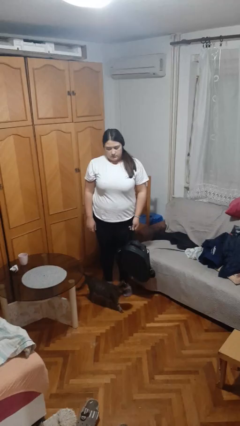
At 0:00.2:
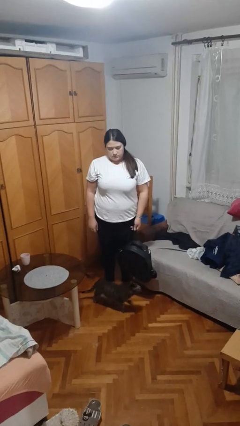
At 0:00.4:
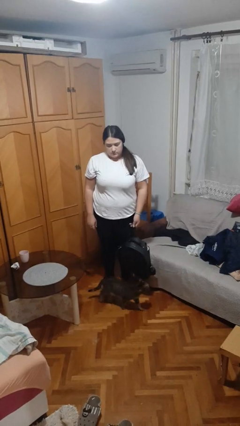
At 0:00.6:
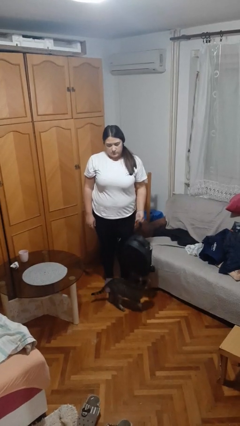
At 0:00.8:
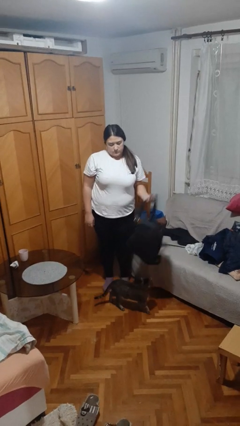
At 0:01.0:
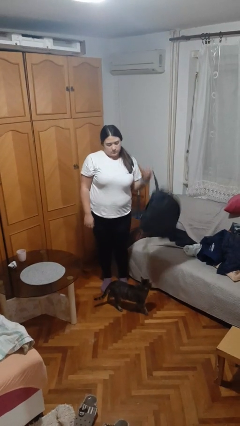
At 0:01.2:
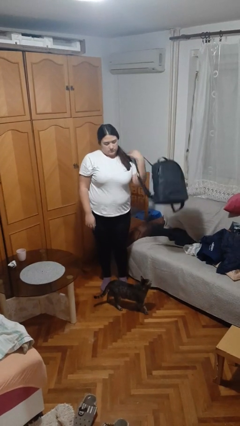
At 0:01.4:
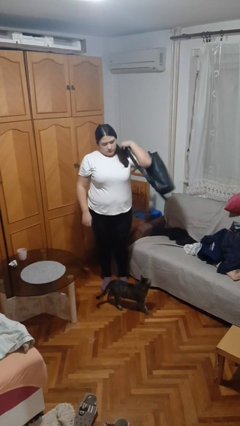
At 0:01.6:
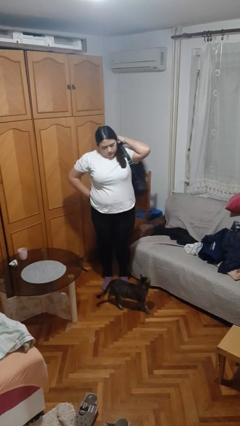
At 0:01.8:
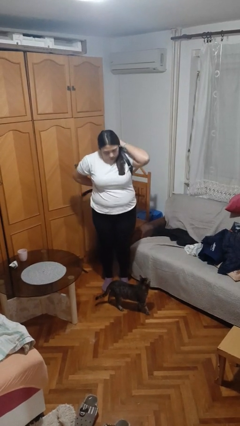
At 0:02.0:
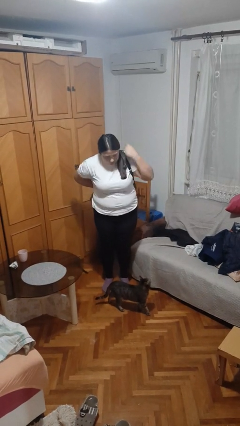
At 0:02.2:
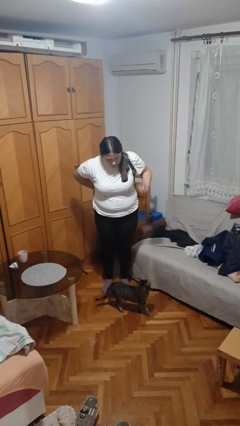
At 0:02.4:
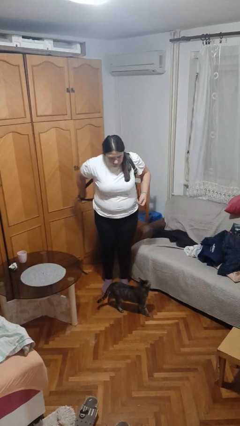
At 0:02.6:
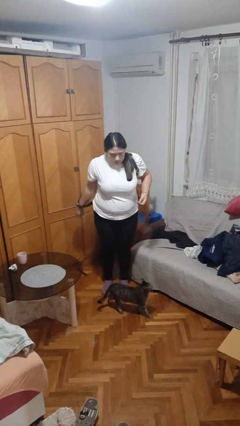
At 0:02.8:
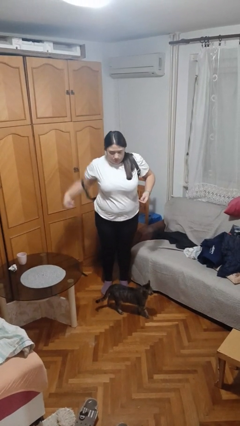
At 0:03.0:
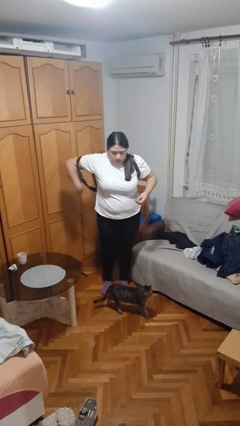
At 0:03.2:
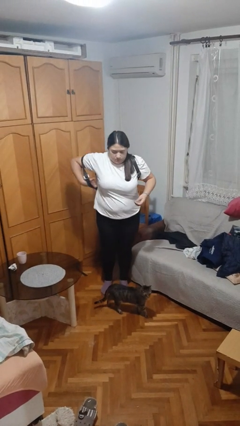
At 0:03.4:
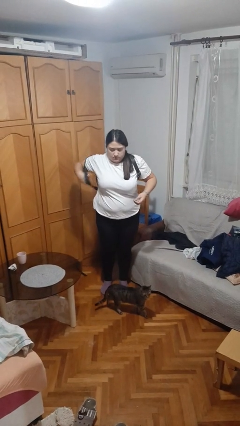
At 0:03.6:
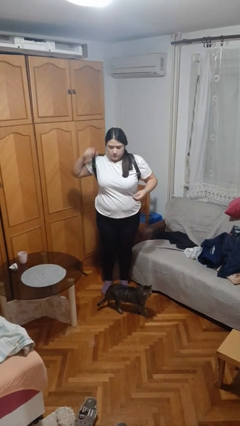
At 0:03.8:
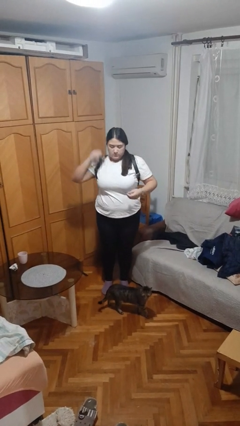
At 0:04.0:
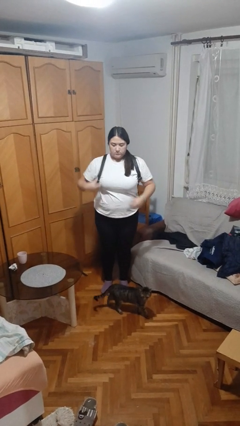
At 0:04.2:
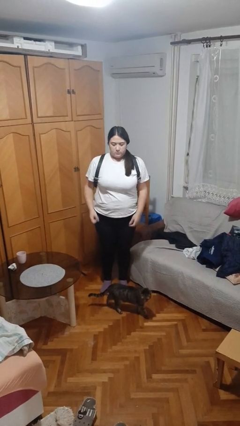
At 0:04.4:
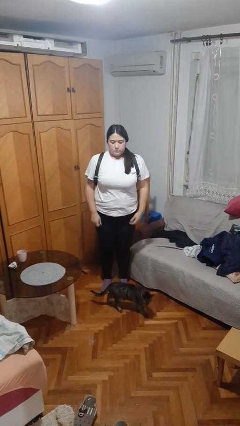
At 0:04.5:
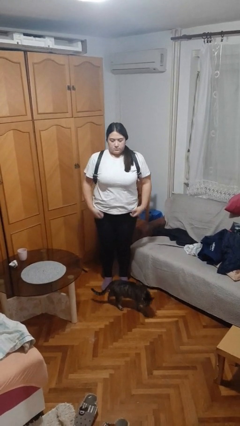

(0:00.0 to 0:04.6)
person puts on backpack

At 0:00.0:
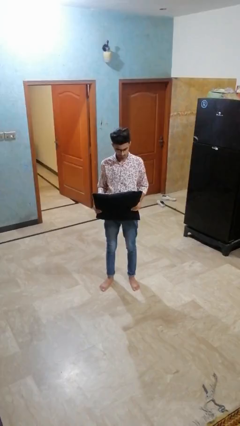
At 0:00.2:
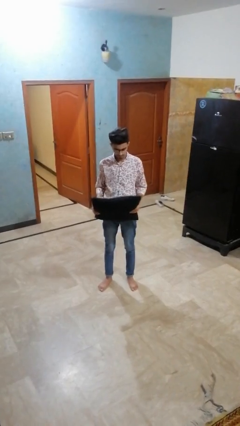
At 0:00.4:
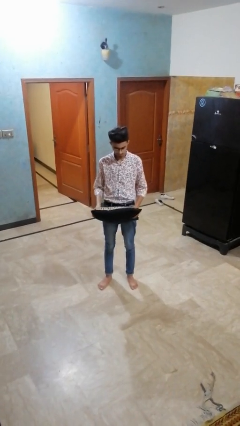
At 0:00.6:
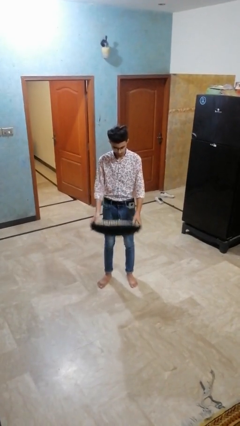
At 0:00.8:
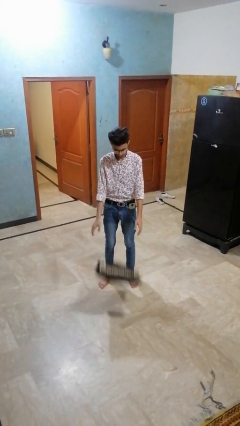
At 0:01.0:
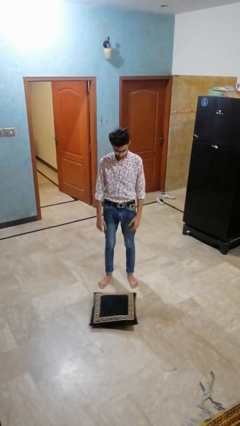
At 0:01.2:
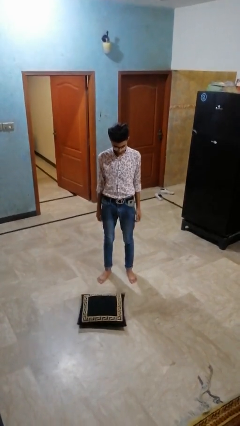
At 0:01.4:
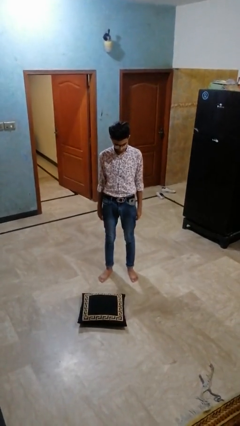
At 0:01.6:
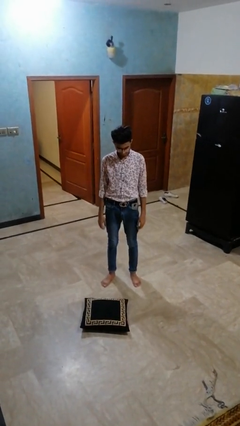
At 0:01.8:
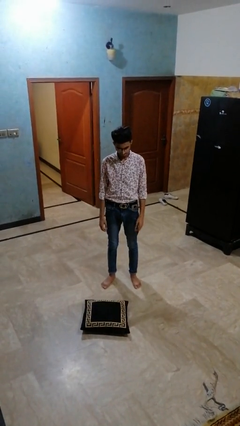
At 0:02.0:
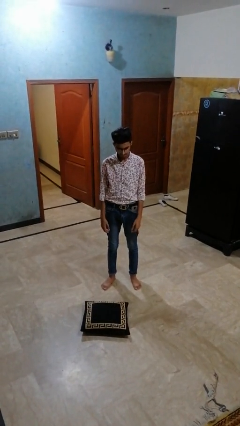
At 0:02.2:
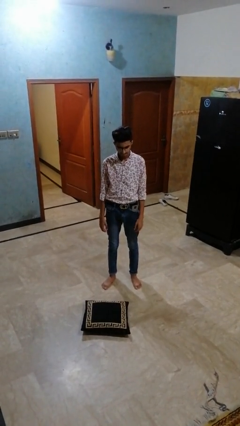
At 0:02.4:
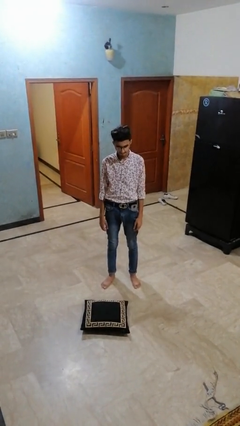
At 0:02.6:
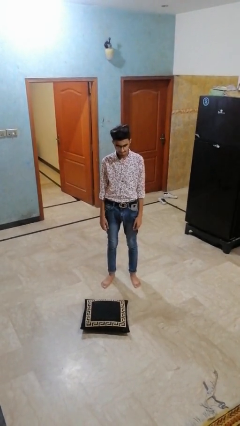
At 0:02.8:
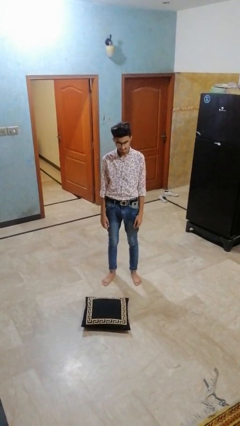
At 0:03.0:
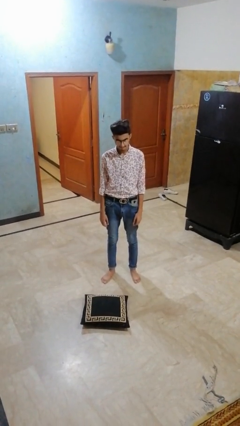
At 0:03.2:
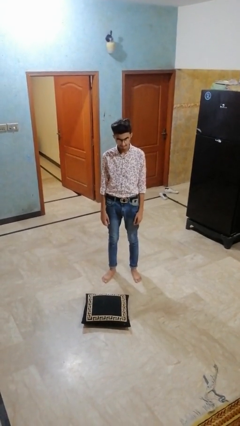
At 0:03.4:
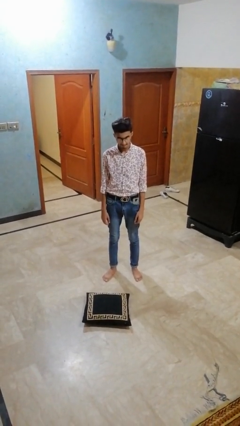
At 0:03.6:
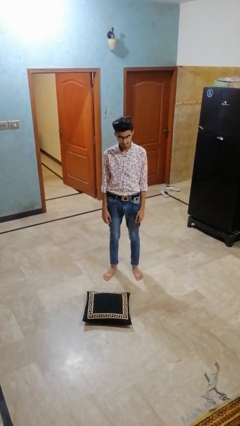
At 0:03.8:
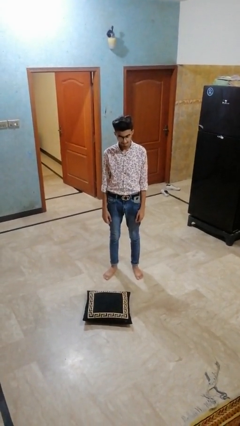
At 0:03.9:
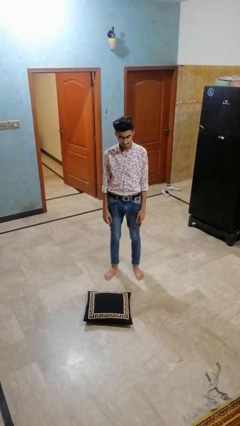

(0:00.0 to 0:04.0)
person throws object to ground

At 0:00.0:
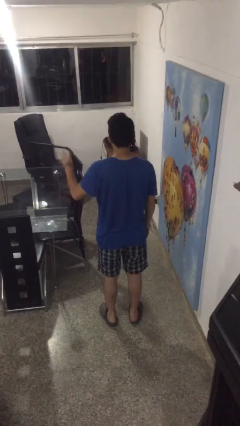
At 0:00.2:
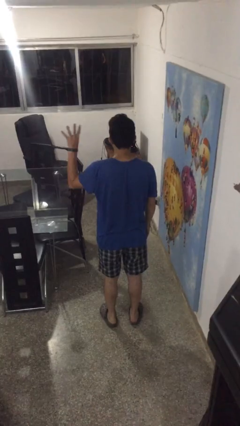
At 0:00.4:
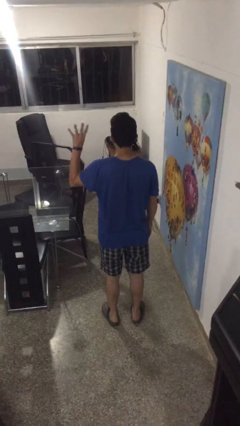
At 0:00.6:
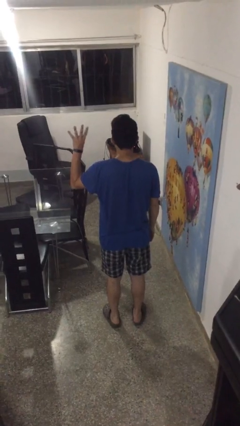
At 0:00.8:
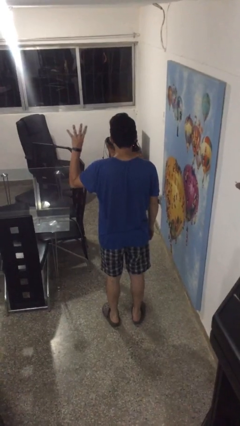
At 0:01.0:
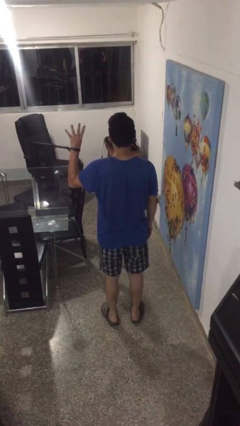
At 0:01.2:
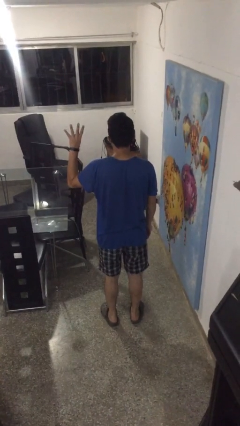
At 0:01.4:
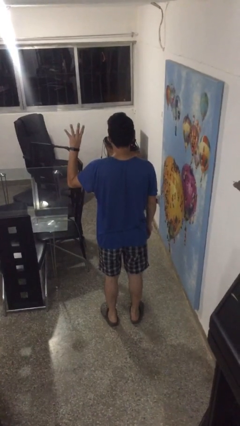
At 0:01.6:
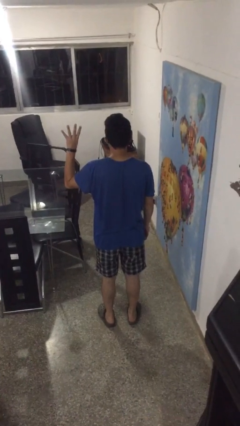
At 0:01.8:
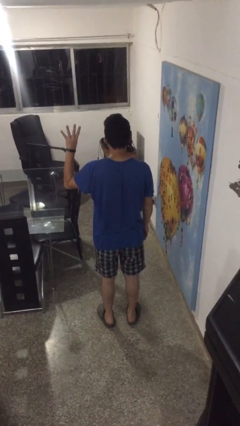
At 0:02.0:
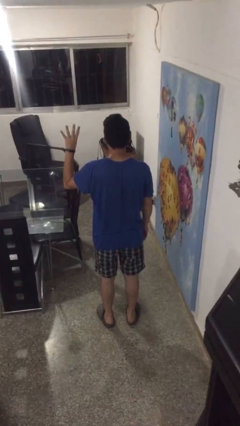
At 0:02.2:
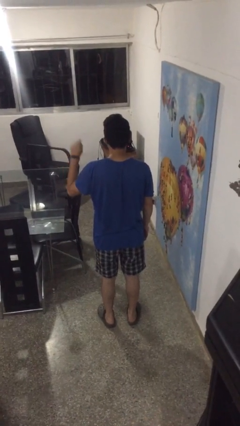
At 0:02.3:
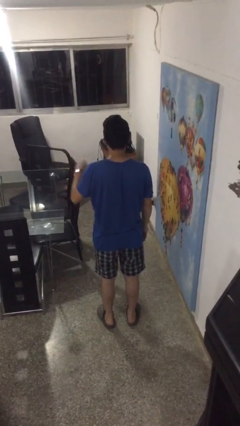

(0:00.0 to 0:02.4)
person gestures number four

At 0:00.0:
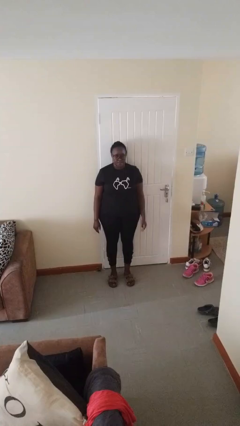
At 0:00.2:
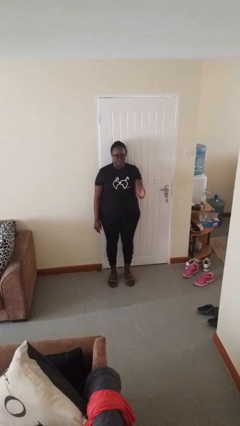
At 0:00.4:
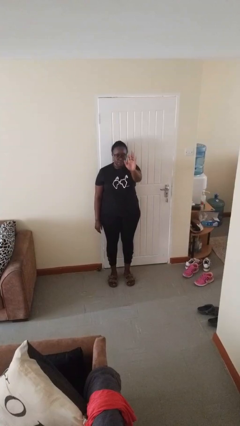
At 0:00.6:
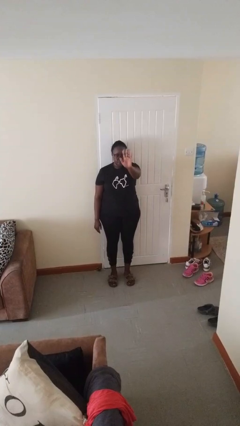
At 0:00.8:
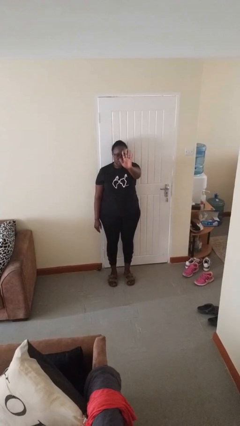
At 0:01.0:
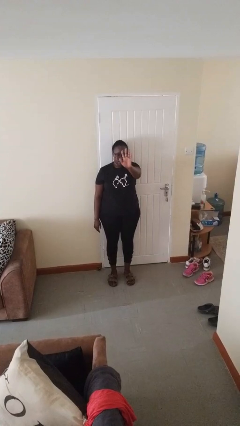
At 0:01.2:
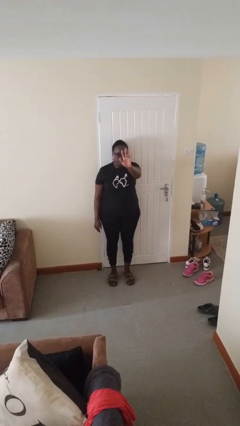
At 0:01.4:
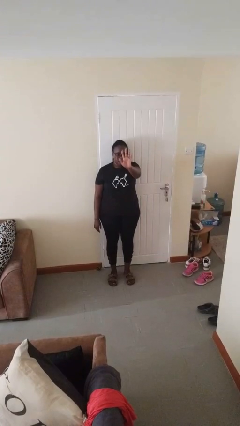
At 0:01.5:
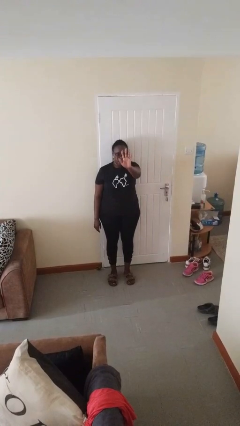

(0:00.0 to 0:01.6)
person gestures number five

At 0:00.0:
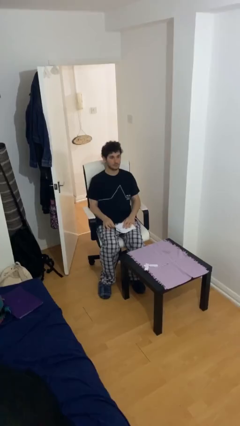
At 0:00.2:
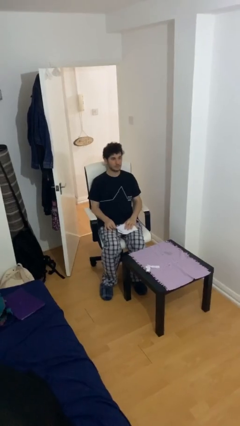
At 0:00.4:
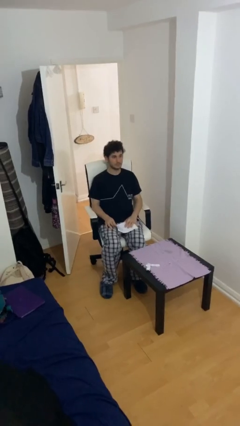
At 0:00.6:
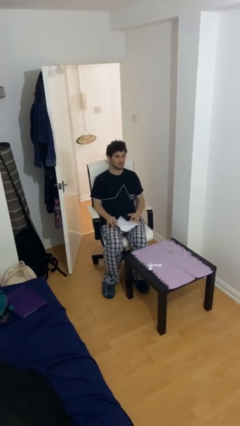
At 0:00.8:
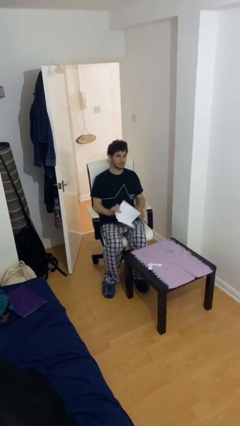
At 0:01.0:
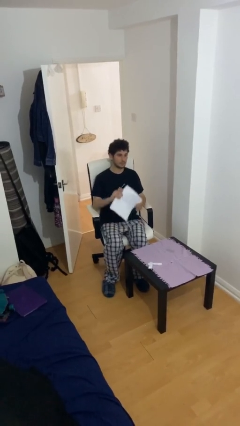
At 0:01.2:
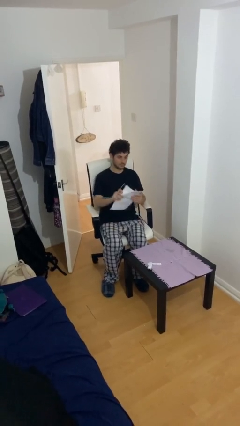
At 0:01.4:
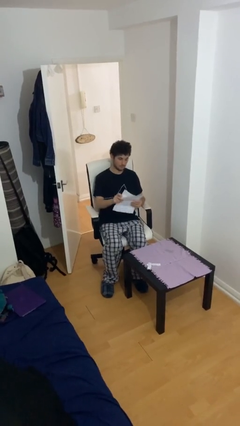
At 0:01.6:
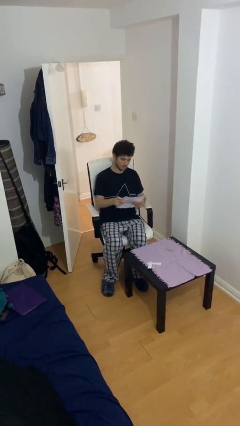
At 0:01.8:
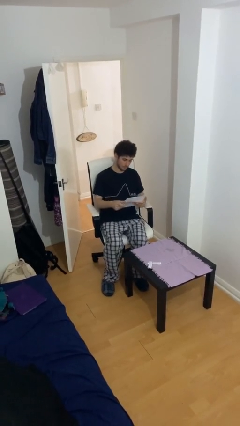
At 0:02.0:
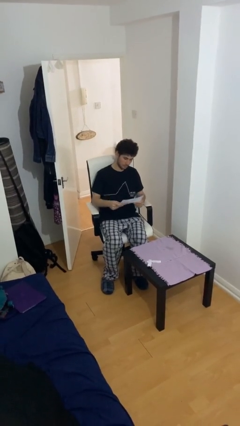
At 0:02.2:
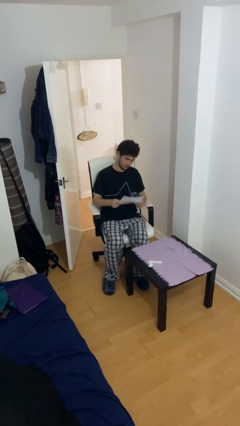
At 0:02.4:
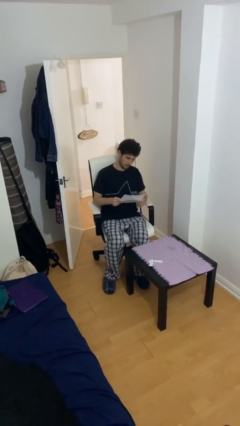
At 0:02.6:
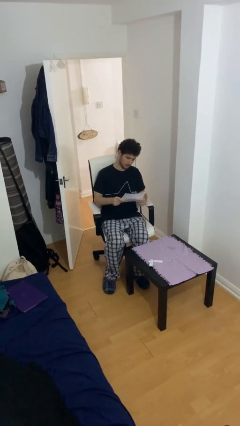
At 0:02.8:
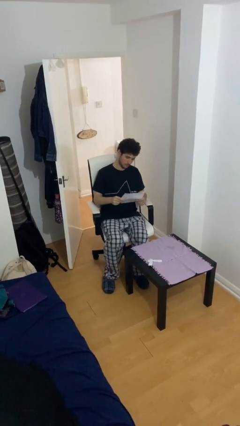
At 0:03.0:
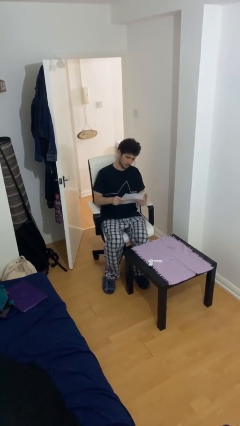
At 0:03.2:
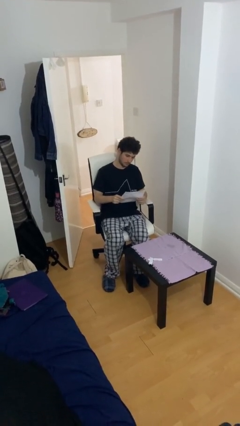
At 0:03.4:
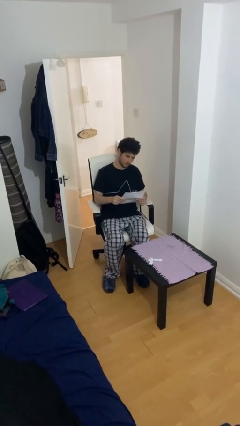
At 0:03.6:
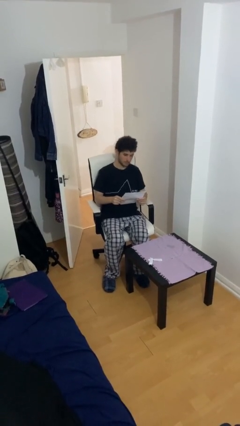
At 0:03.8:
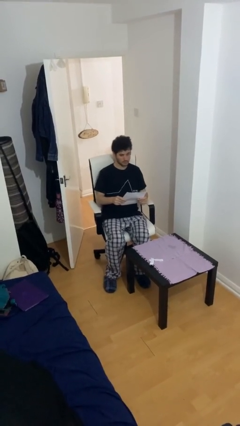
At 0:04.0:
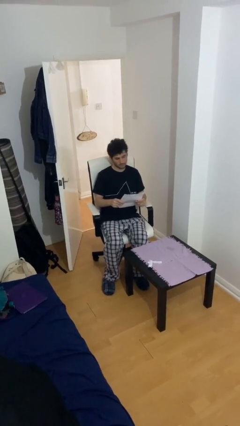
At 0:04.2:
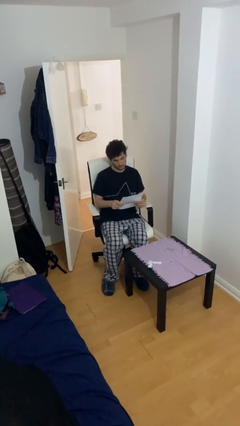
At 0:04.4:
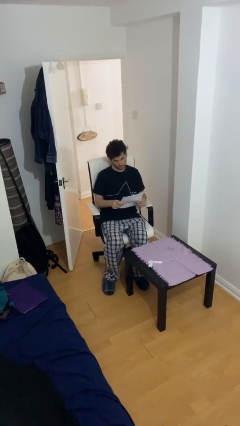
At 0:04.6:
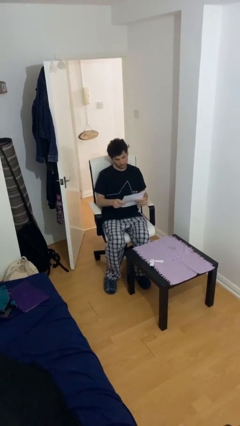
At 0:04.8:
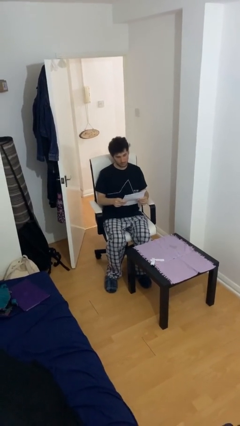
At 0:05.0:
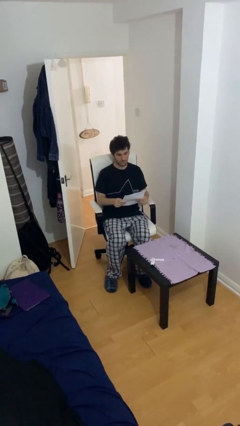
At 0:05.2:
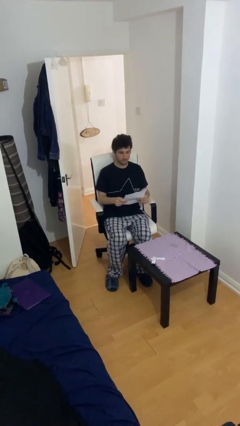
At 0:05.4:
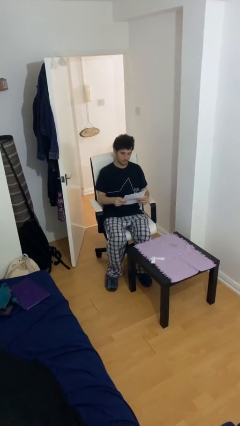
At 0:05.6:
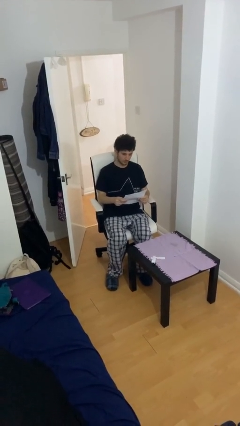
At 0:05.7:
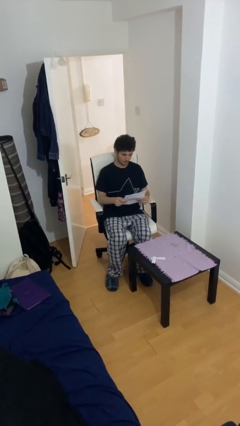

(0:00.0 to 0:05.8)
person reads document
